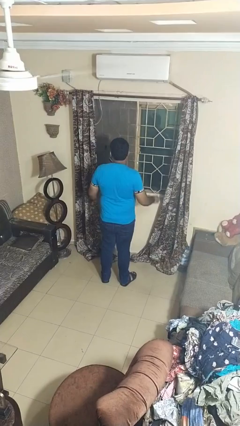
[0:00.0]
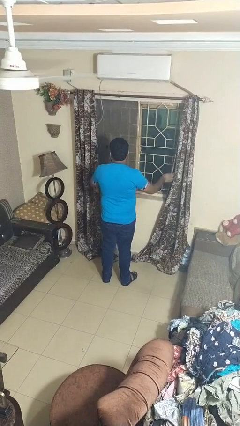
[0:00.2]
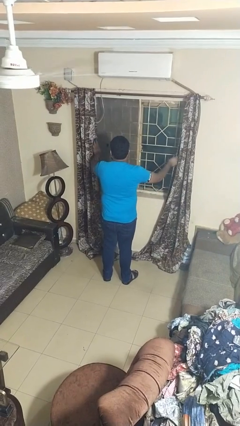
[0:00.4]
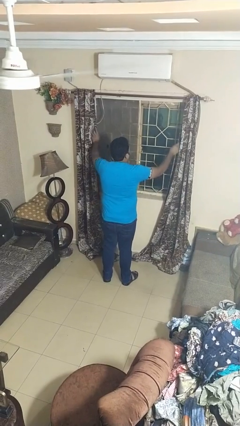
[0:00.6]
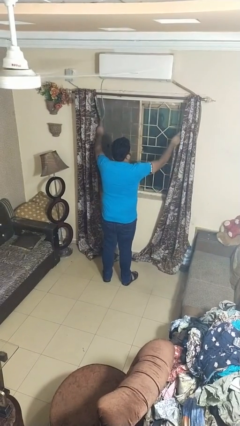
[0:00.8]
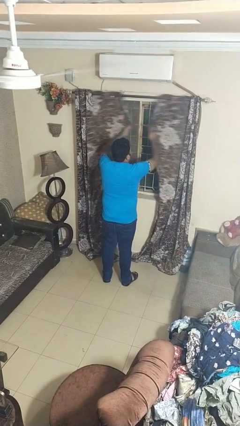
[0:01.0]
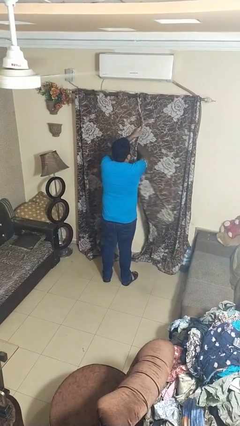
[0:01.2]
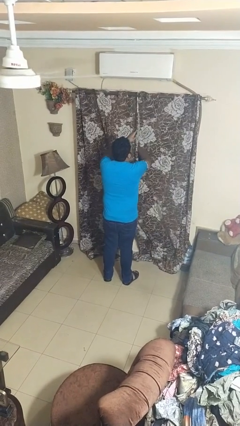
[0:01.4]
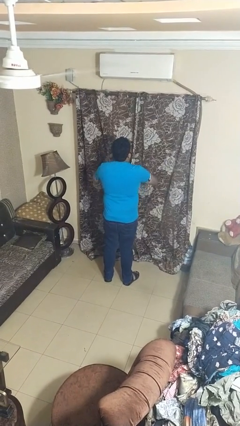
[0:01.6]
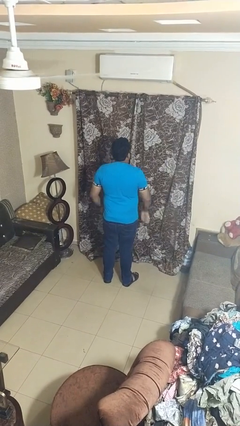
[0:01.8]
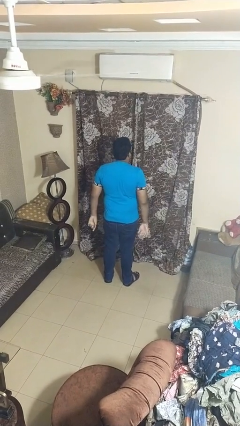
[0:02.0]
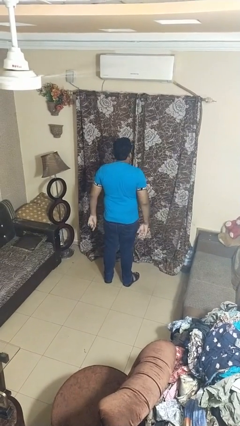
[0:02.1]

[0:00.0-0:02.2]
person closes curtains

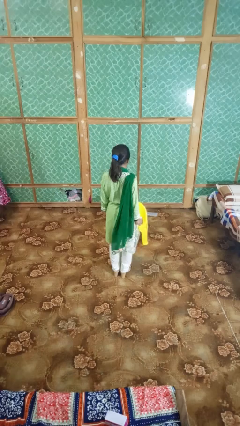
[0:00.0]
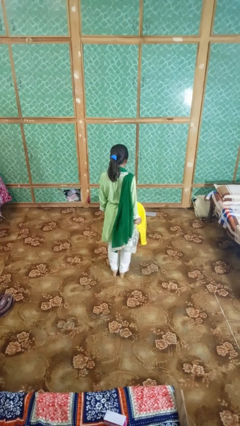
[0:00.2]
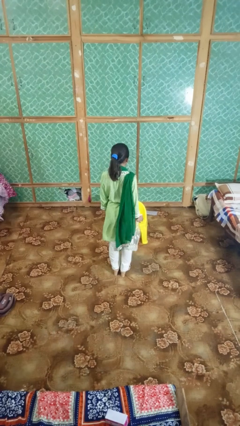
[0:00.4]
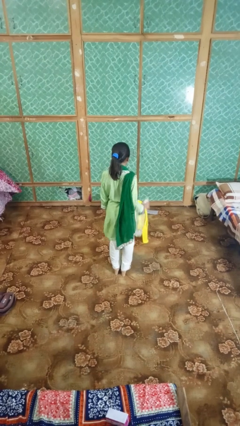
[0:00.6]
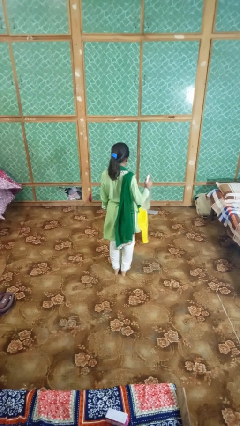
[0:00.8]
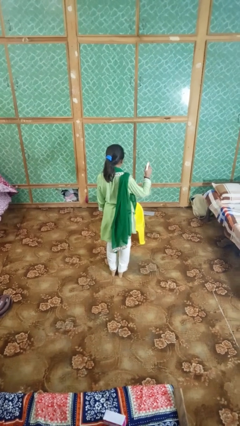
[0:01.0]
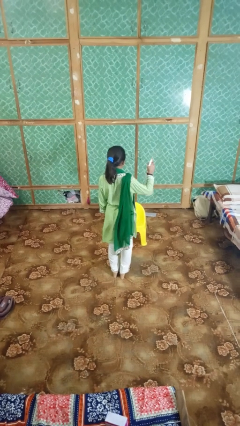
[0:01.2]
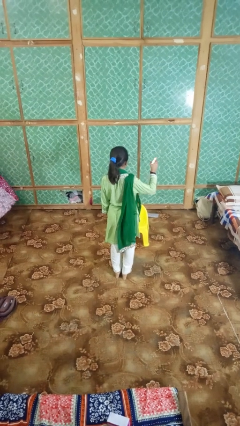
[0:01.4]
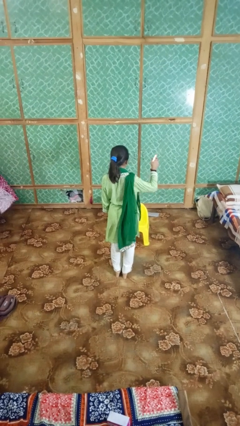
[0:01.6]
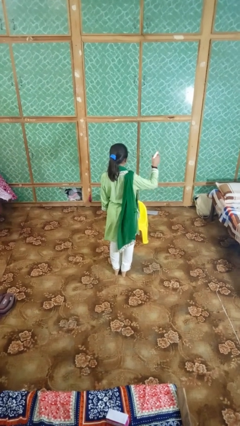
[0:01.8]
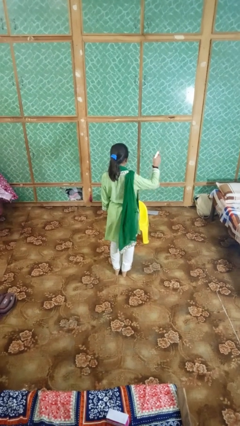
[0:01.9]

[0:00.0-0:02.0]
person sprays from bottle

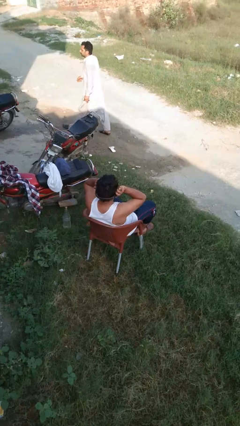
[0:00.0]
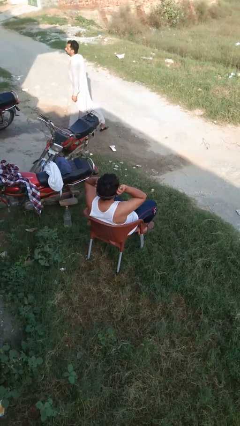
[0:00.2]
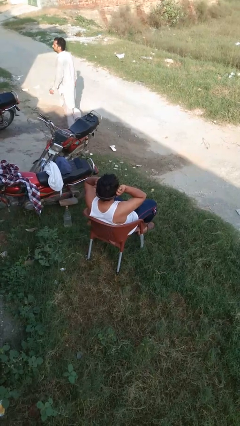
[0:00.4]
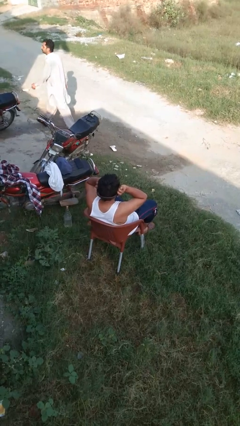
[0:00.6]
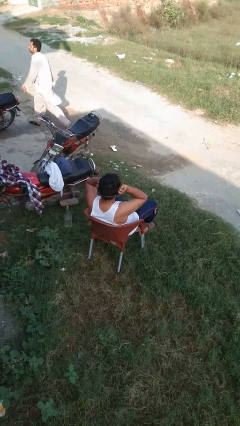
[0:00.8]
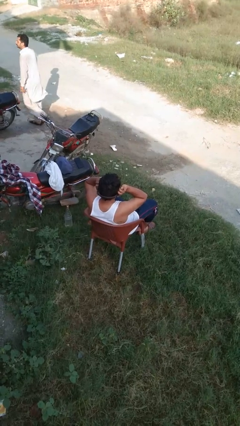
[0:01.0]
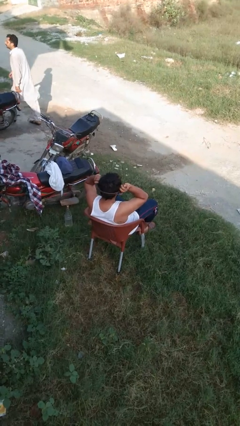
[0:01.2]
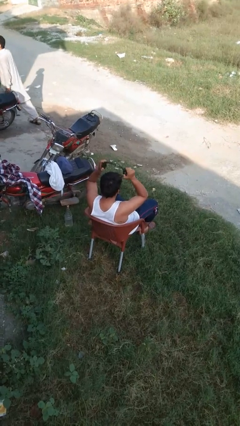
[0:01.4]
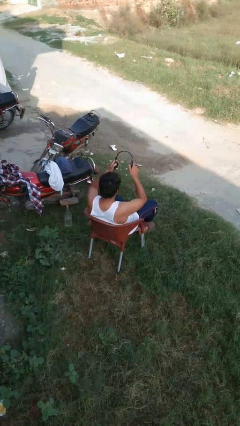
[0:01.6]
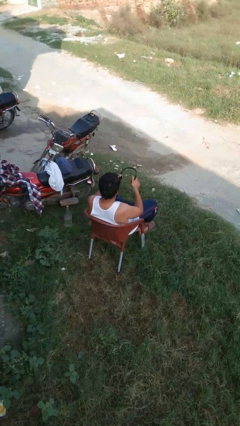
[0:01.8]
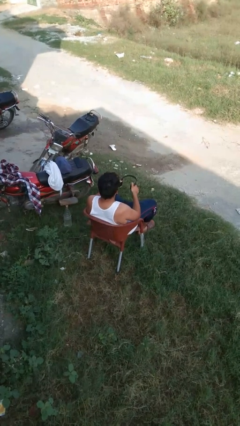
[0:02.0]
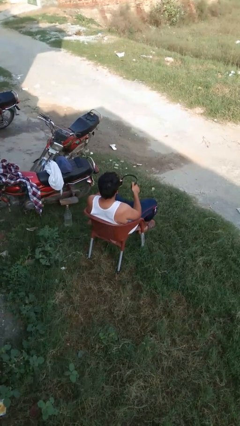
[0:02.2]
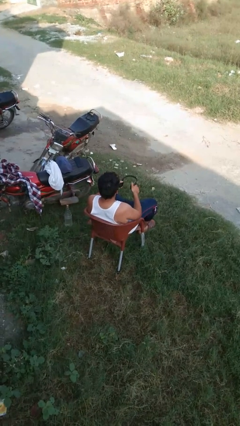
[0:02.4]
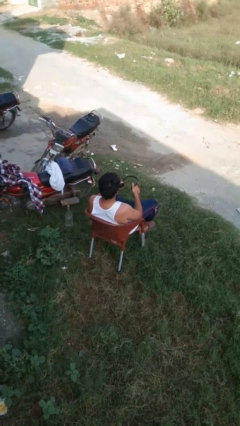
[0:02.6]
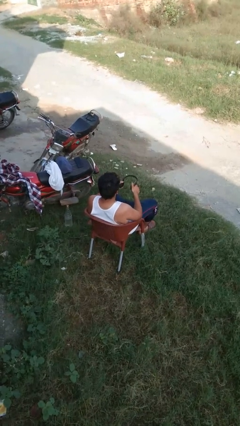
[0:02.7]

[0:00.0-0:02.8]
person takes off headphones

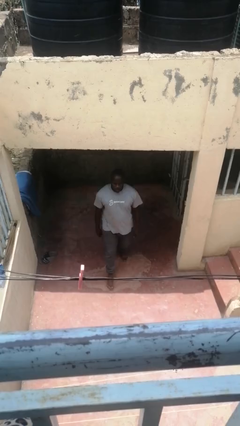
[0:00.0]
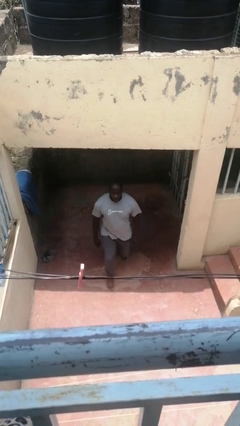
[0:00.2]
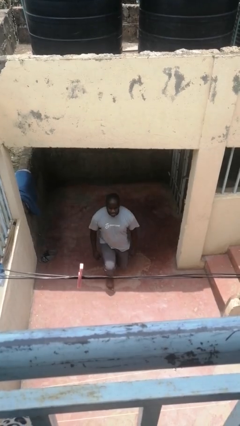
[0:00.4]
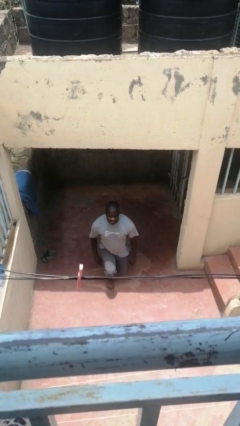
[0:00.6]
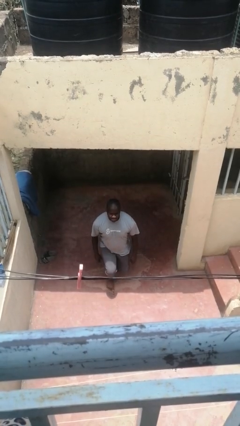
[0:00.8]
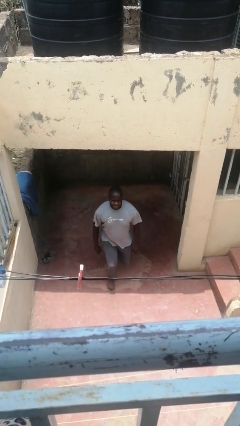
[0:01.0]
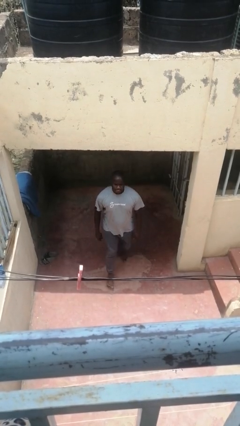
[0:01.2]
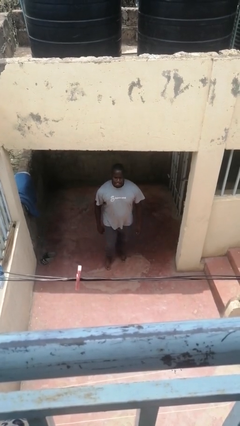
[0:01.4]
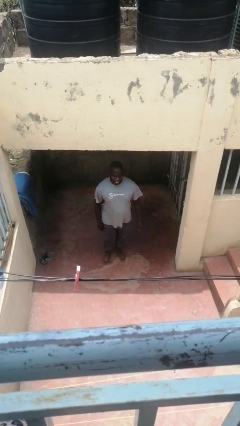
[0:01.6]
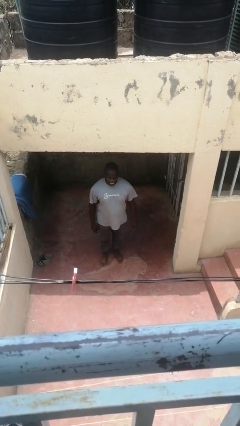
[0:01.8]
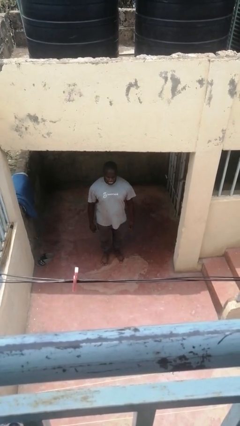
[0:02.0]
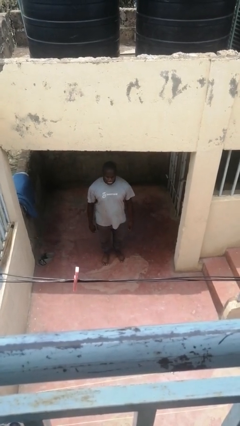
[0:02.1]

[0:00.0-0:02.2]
person exercises with lunges

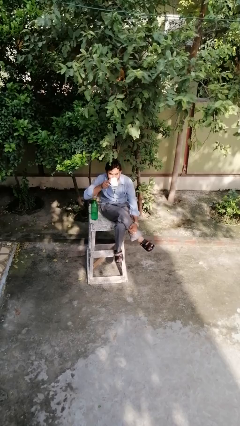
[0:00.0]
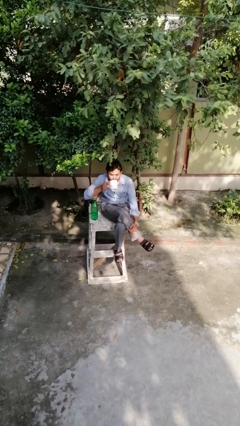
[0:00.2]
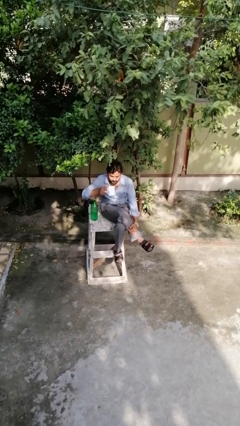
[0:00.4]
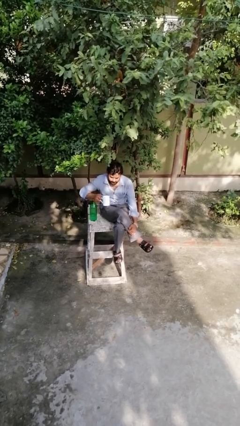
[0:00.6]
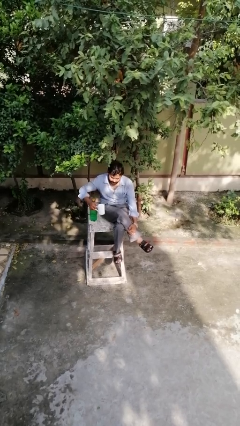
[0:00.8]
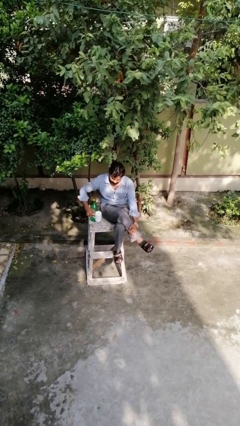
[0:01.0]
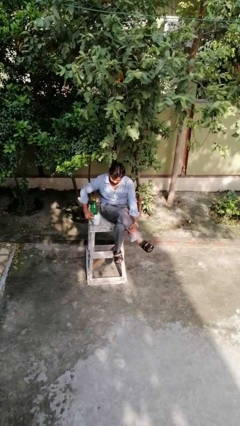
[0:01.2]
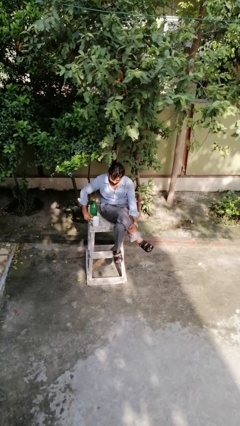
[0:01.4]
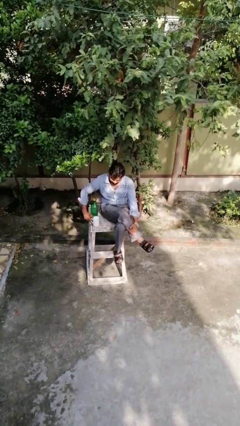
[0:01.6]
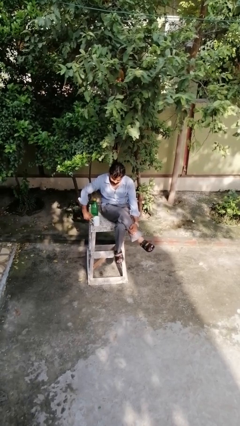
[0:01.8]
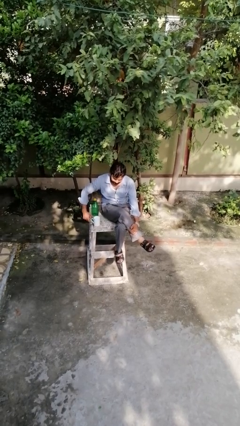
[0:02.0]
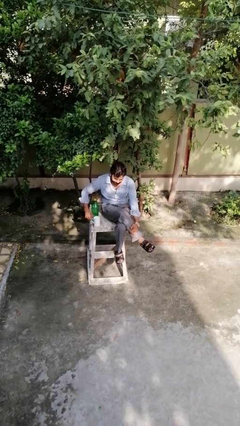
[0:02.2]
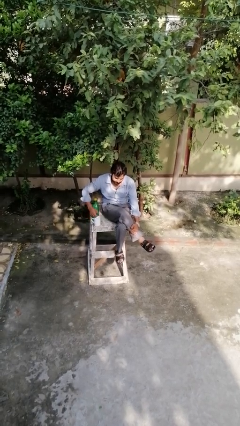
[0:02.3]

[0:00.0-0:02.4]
person puts down object on table

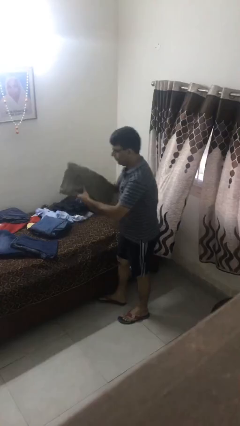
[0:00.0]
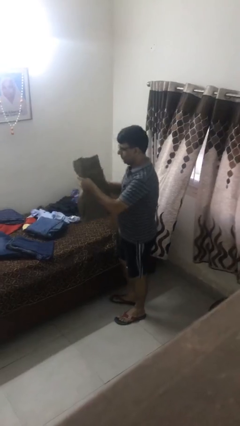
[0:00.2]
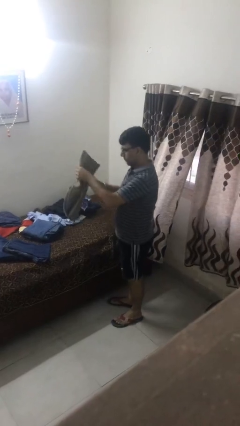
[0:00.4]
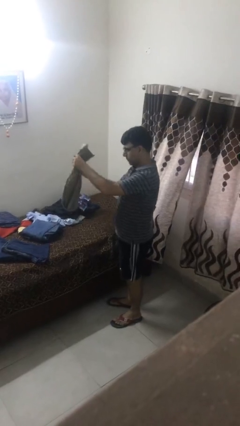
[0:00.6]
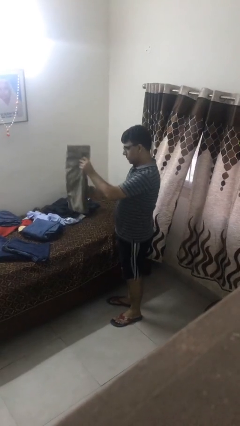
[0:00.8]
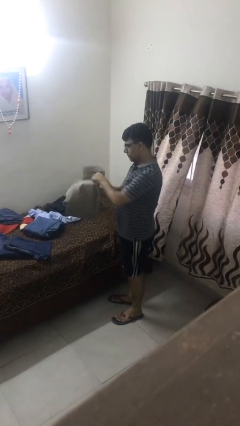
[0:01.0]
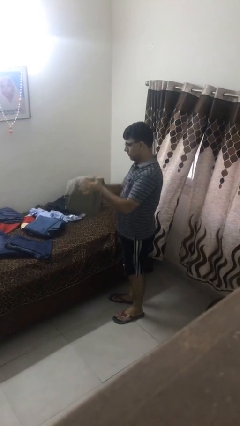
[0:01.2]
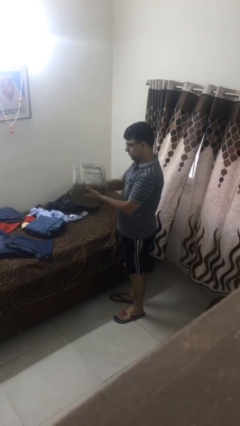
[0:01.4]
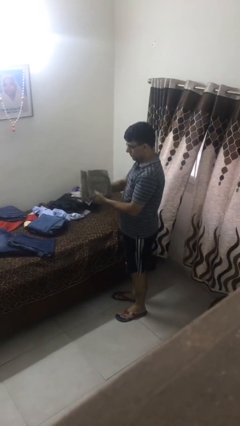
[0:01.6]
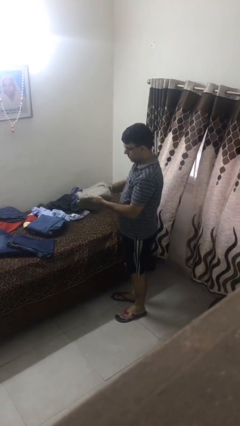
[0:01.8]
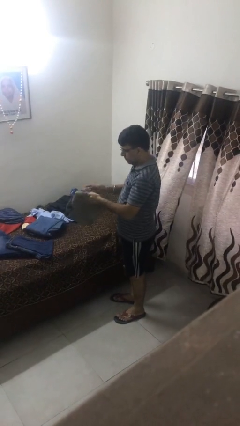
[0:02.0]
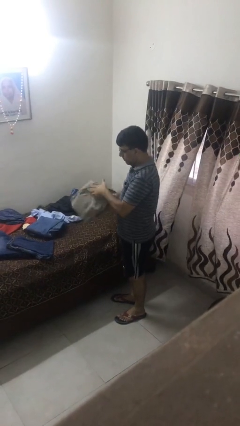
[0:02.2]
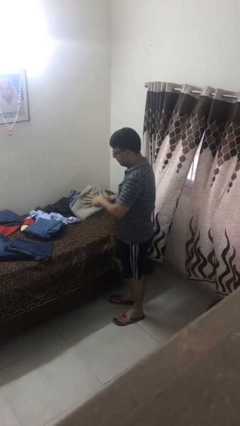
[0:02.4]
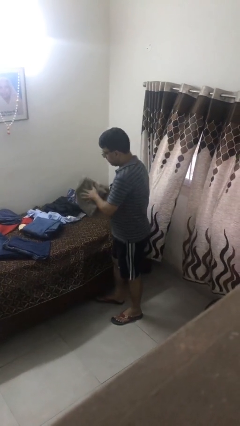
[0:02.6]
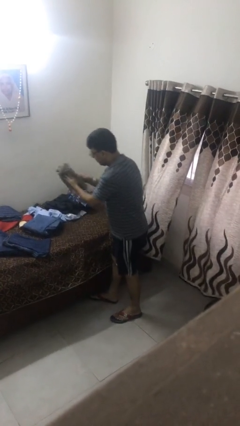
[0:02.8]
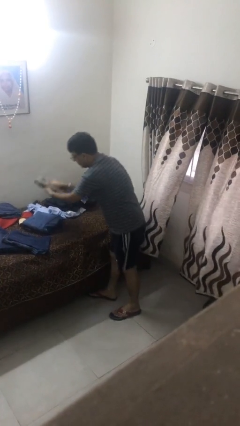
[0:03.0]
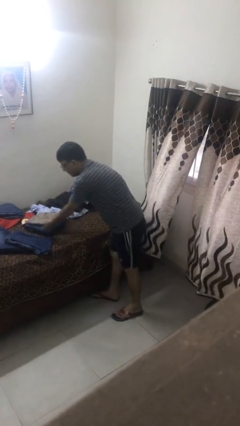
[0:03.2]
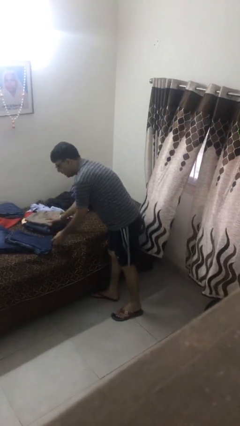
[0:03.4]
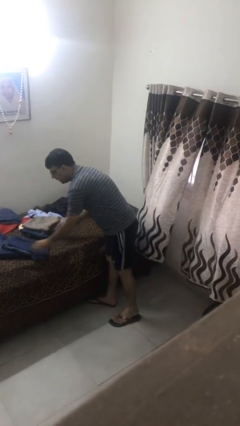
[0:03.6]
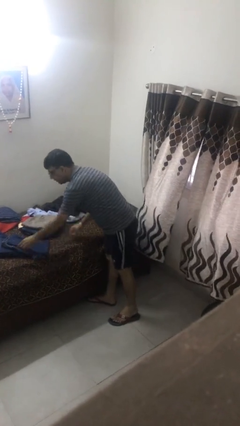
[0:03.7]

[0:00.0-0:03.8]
person folds pants

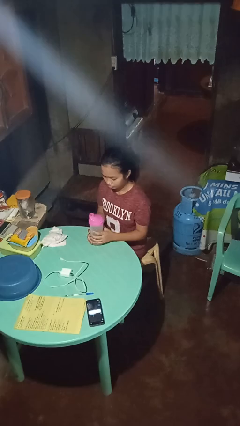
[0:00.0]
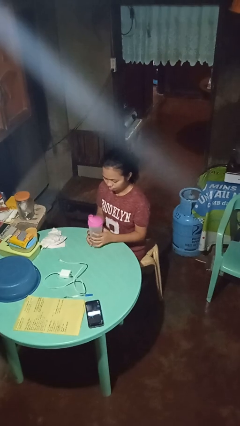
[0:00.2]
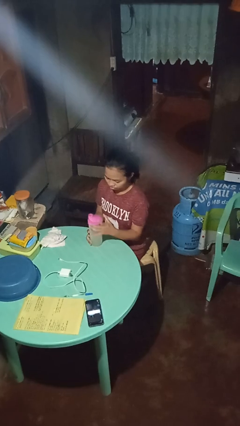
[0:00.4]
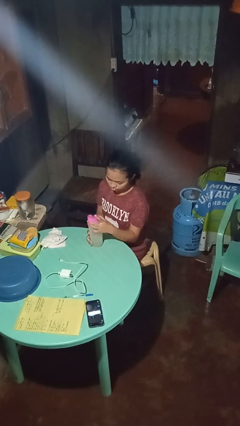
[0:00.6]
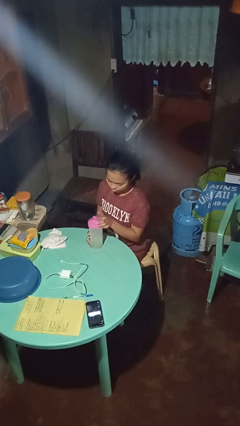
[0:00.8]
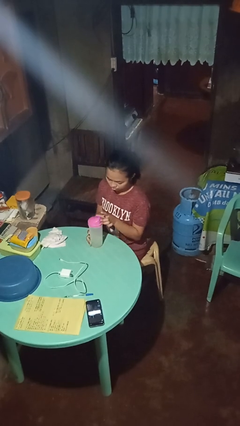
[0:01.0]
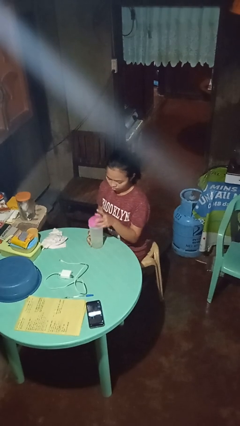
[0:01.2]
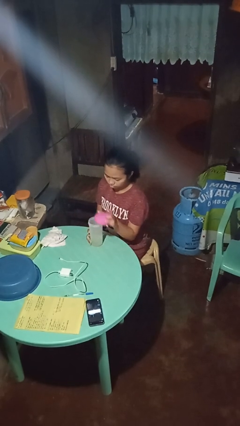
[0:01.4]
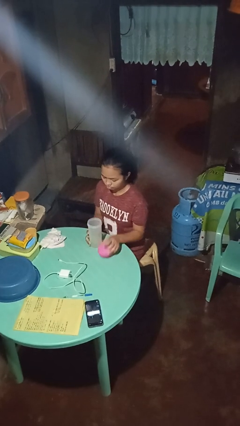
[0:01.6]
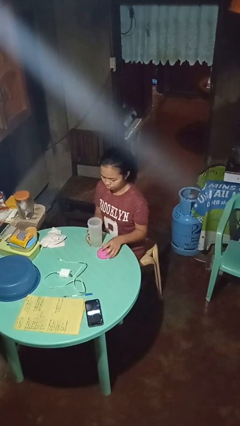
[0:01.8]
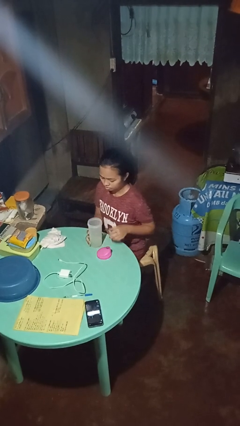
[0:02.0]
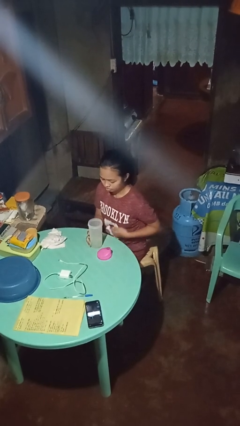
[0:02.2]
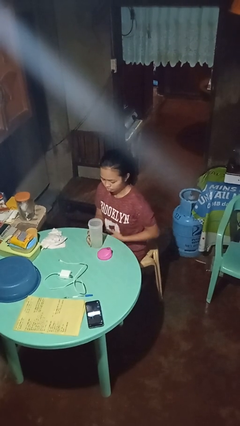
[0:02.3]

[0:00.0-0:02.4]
person unscrews lid from bottle
